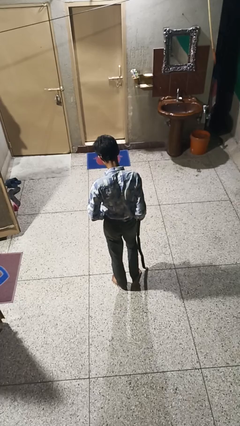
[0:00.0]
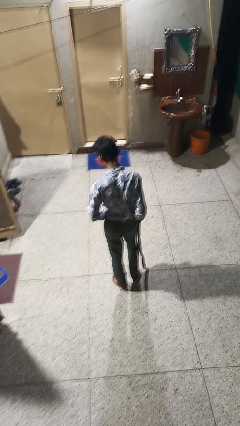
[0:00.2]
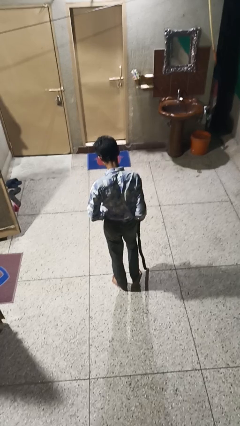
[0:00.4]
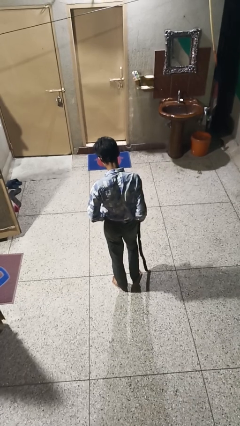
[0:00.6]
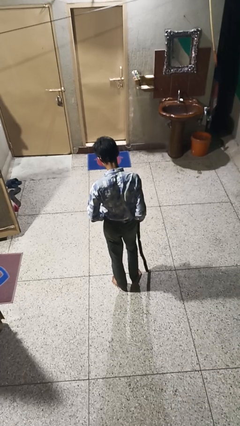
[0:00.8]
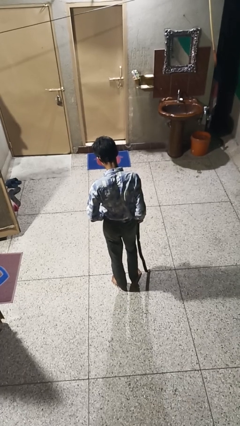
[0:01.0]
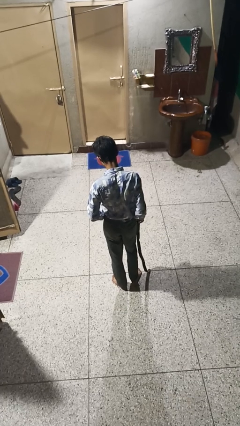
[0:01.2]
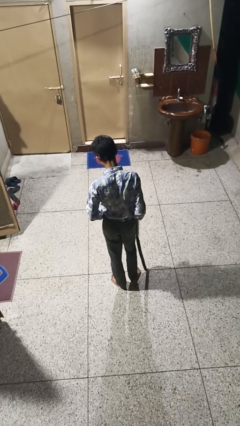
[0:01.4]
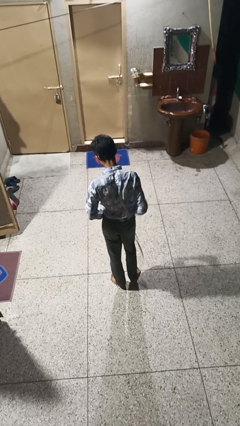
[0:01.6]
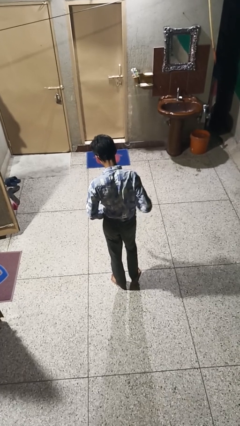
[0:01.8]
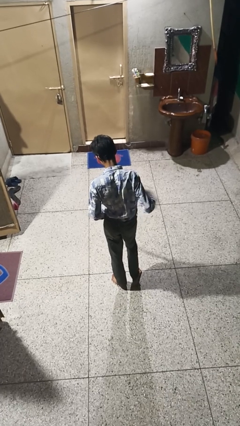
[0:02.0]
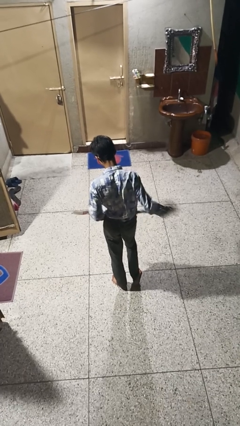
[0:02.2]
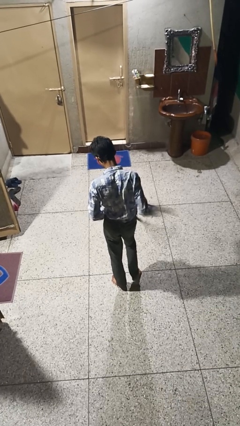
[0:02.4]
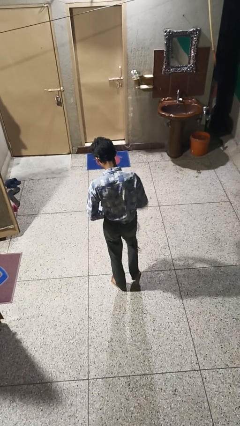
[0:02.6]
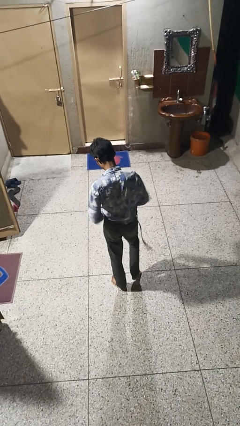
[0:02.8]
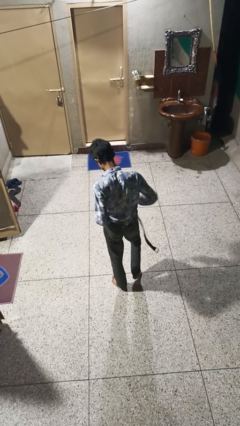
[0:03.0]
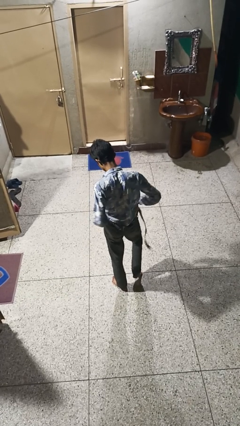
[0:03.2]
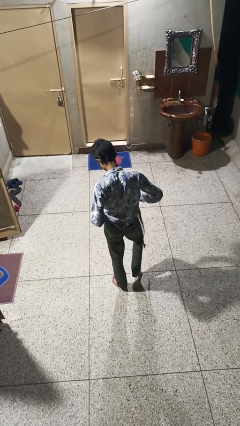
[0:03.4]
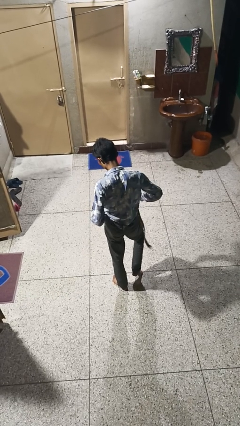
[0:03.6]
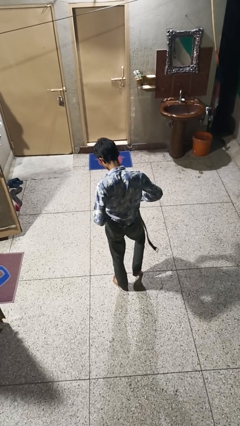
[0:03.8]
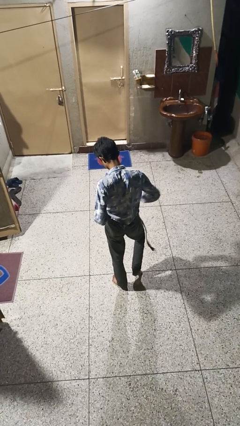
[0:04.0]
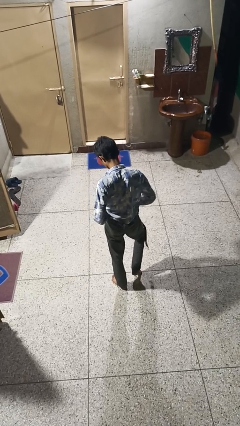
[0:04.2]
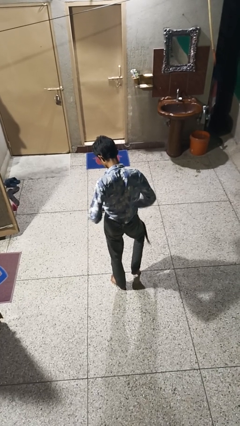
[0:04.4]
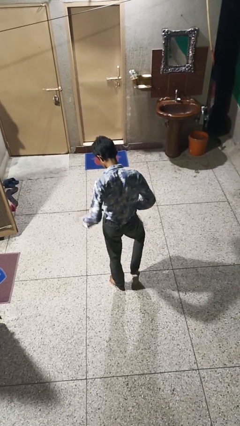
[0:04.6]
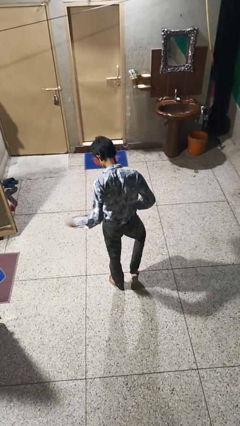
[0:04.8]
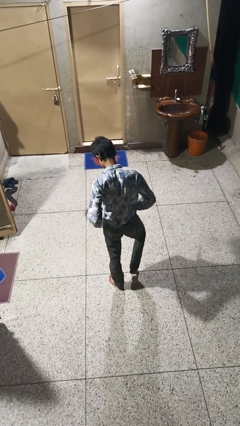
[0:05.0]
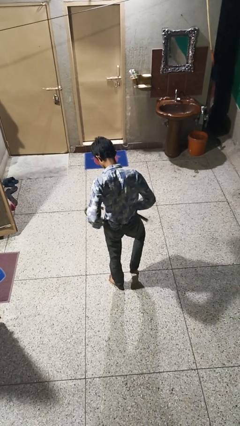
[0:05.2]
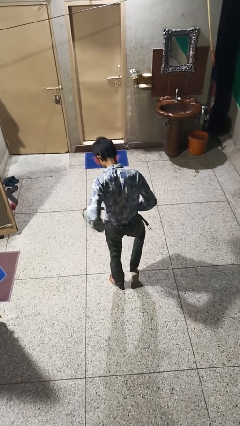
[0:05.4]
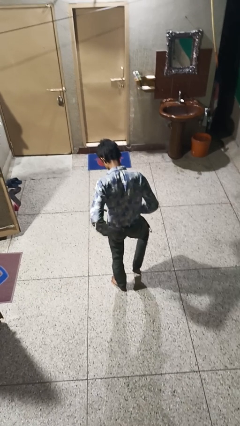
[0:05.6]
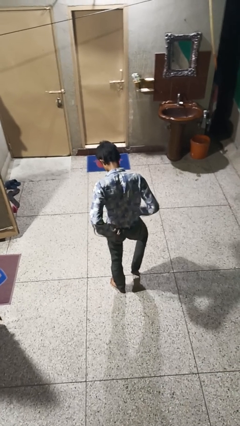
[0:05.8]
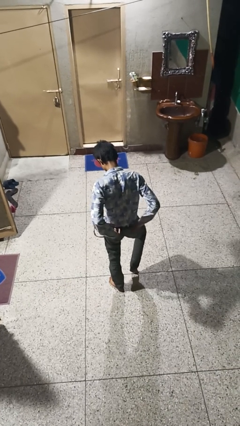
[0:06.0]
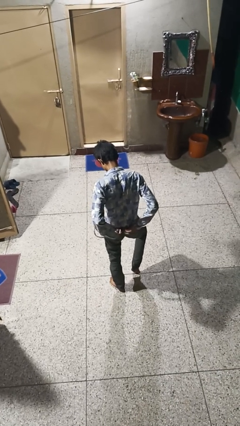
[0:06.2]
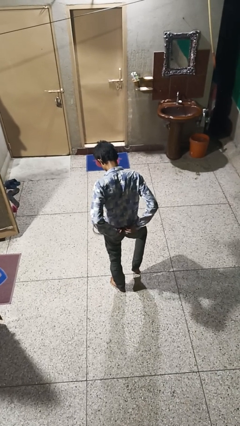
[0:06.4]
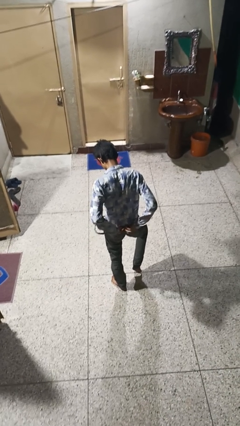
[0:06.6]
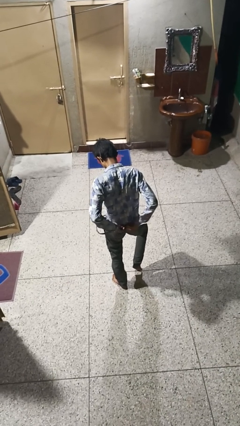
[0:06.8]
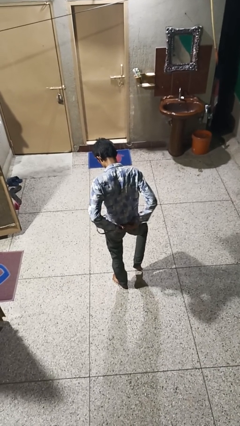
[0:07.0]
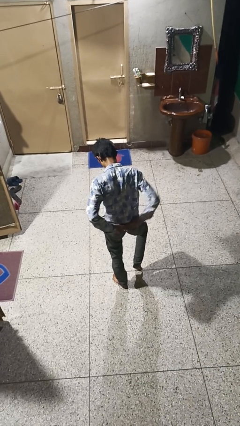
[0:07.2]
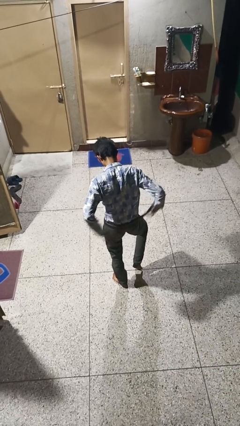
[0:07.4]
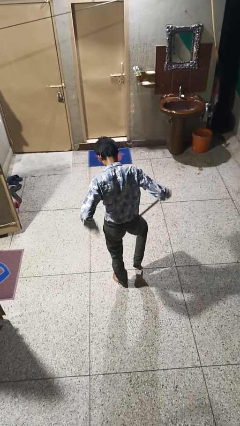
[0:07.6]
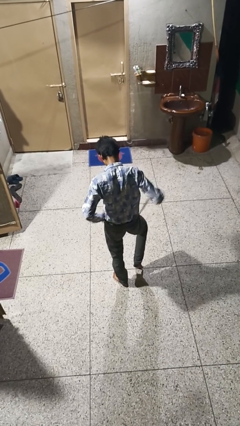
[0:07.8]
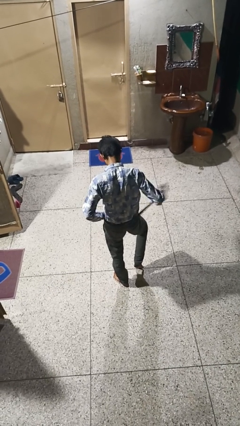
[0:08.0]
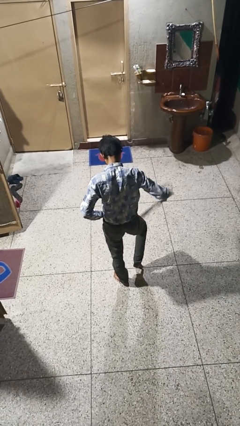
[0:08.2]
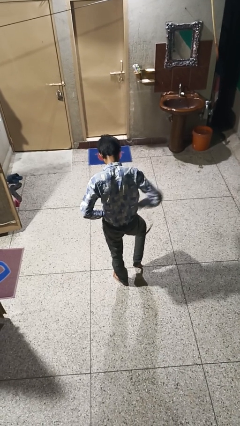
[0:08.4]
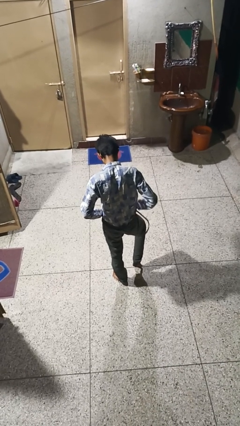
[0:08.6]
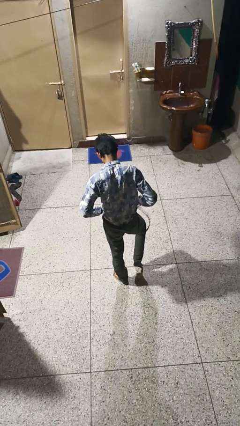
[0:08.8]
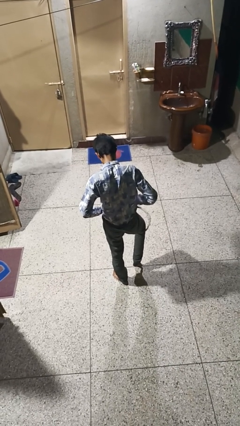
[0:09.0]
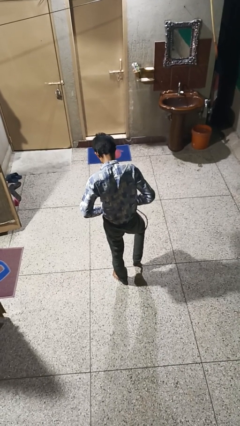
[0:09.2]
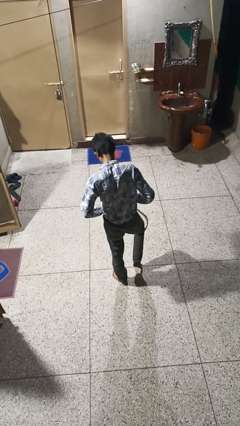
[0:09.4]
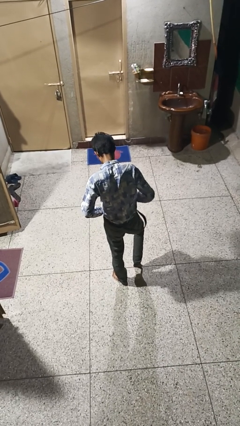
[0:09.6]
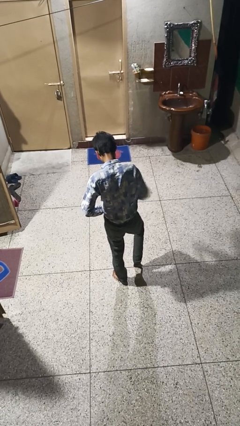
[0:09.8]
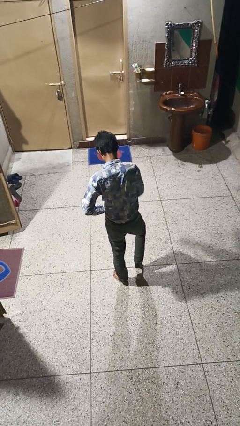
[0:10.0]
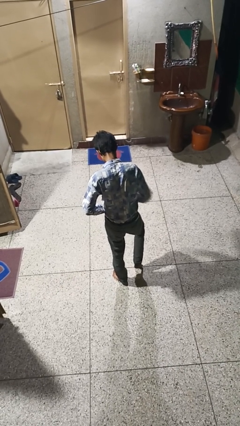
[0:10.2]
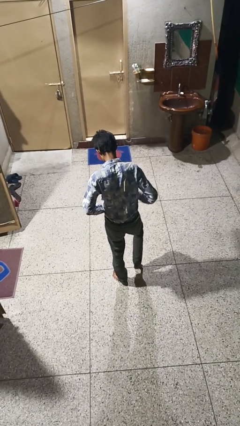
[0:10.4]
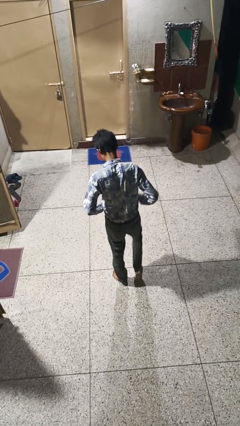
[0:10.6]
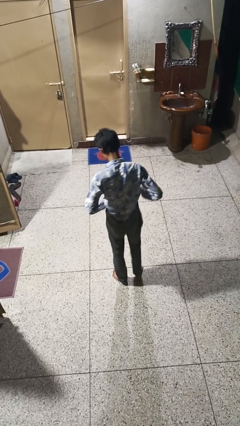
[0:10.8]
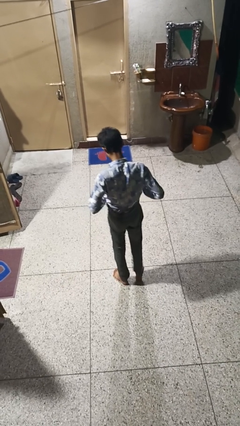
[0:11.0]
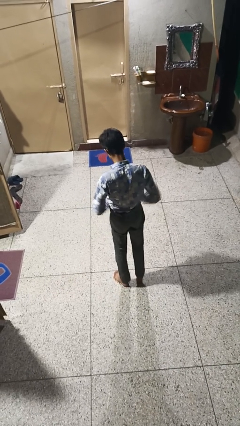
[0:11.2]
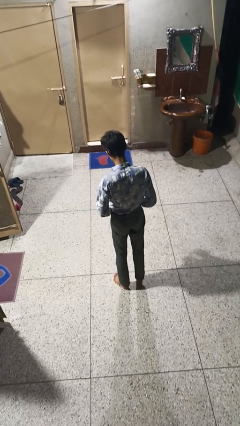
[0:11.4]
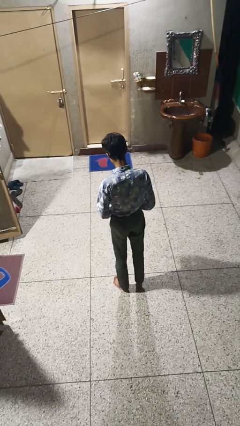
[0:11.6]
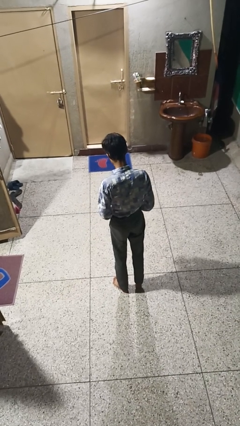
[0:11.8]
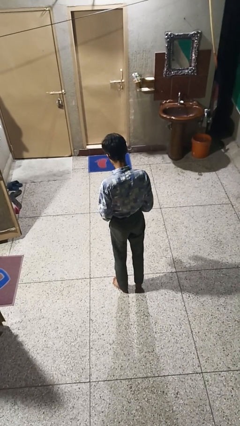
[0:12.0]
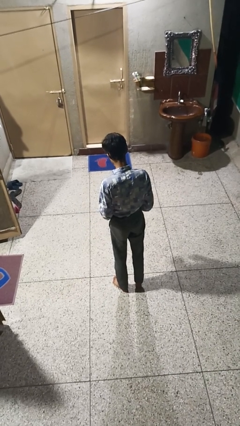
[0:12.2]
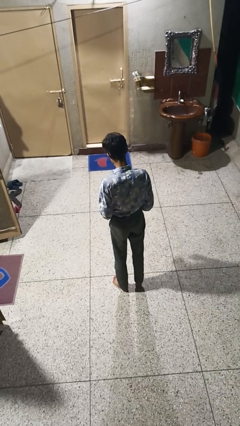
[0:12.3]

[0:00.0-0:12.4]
person puts on belt

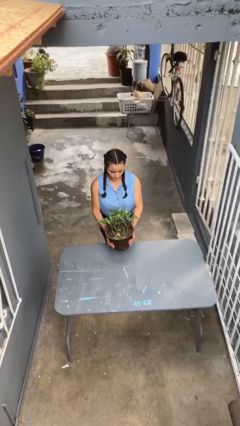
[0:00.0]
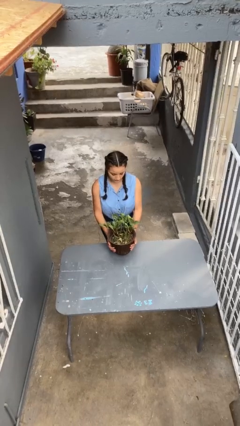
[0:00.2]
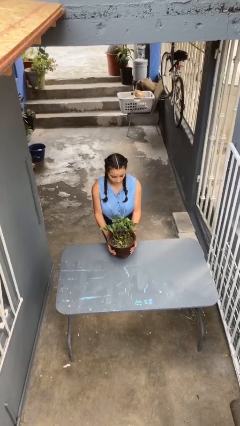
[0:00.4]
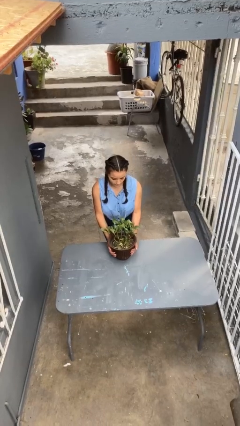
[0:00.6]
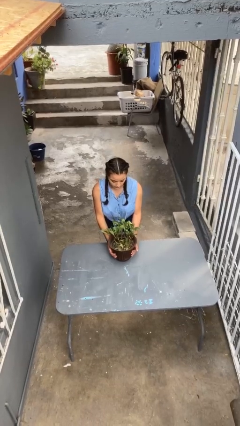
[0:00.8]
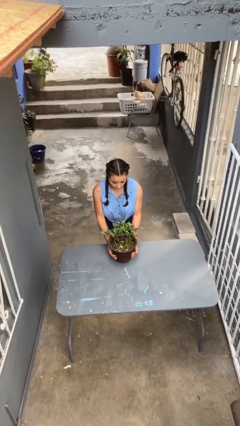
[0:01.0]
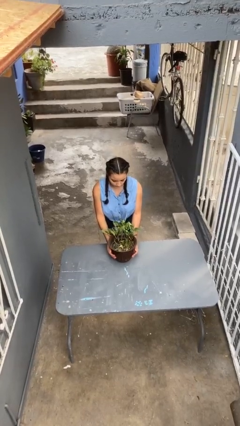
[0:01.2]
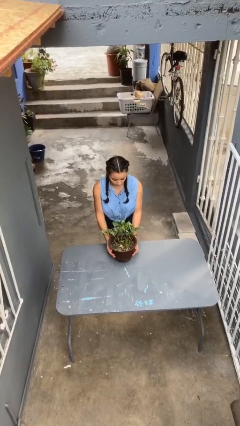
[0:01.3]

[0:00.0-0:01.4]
person puts down object on table

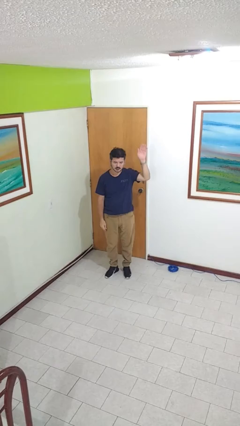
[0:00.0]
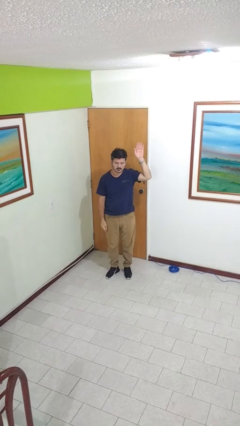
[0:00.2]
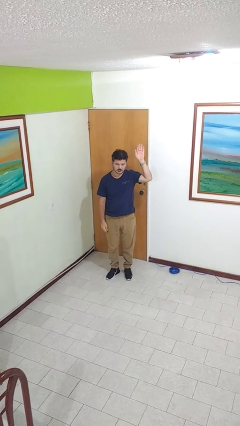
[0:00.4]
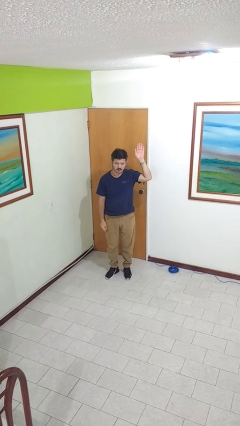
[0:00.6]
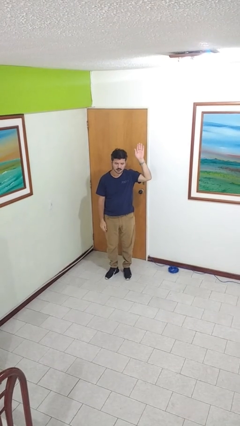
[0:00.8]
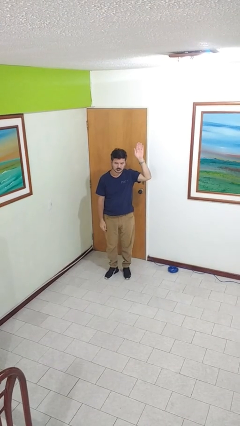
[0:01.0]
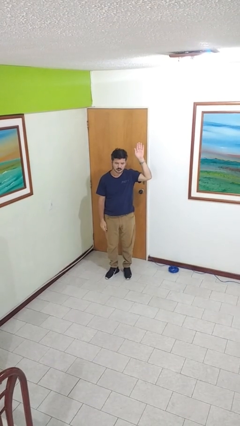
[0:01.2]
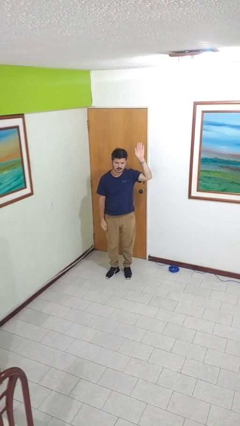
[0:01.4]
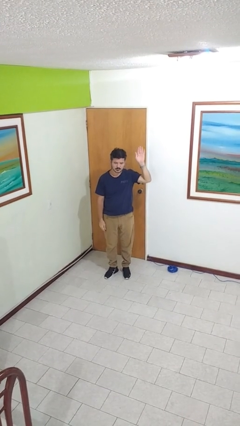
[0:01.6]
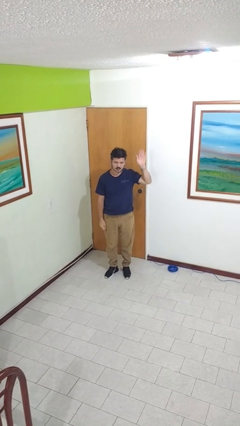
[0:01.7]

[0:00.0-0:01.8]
person gestures raise hand

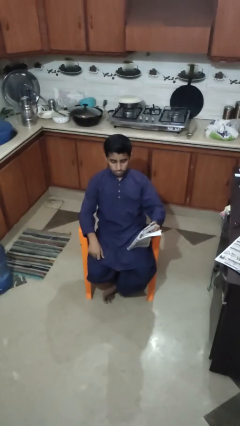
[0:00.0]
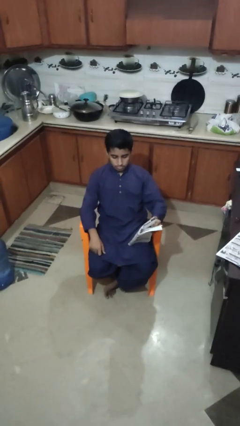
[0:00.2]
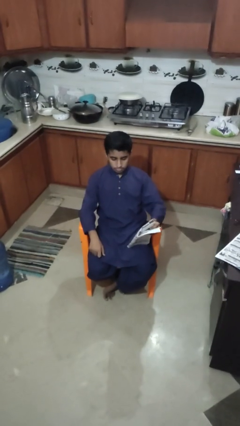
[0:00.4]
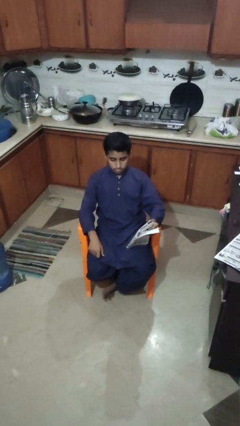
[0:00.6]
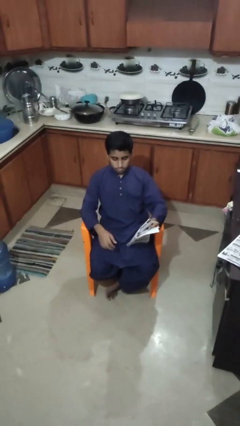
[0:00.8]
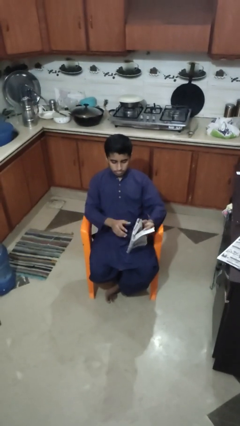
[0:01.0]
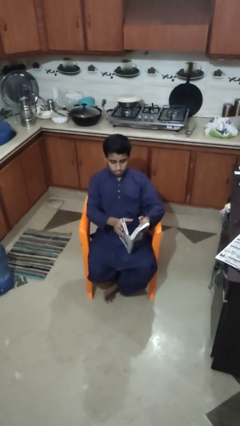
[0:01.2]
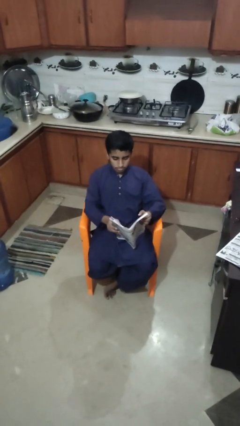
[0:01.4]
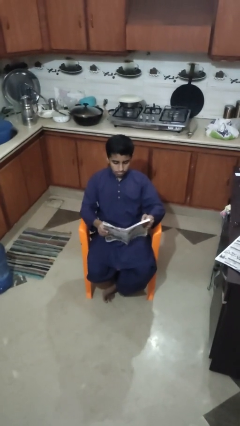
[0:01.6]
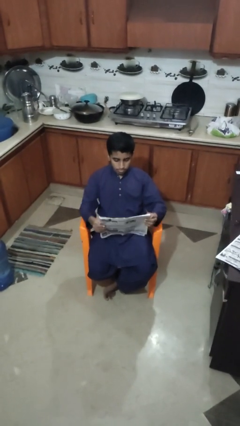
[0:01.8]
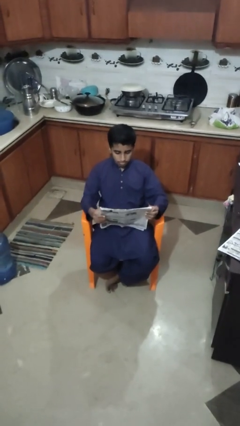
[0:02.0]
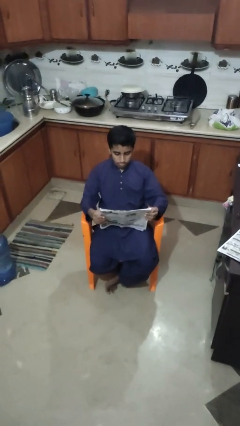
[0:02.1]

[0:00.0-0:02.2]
person reads newspaper
